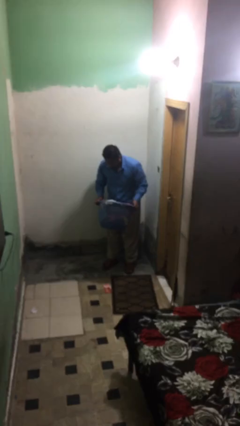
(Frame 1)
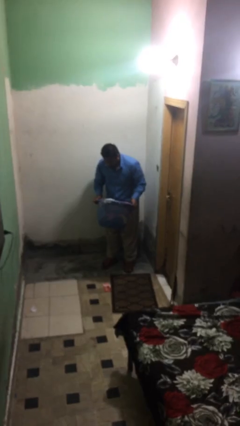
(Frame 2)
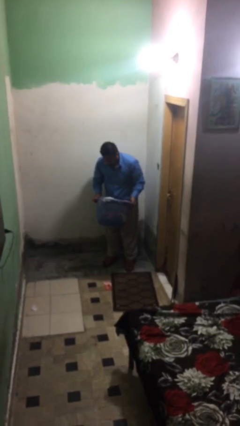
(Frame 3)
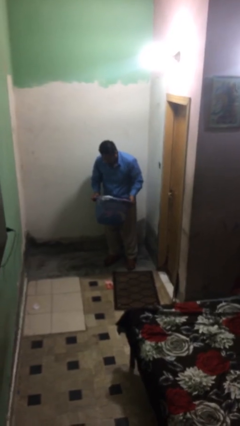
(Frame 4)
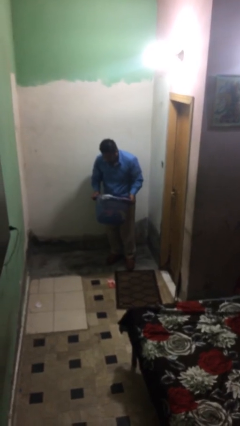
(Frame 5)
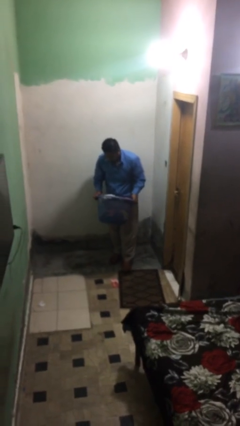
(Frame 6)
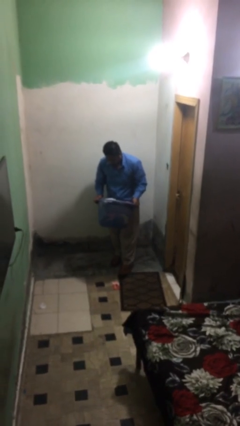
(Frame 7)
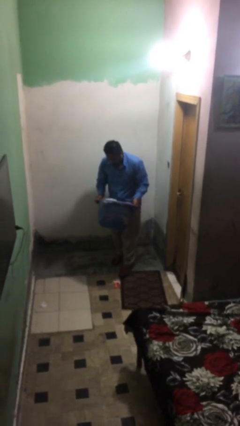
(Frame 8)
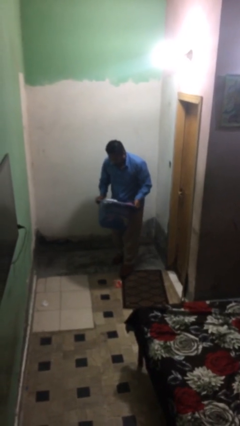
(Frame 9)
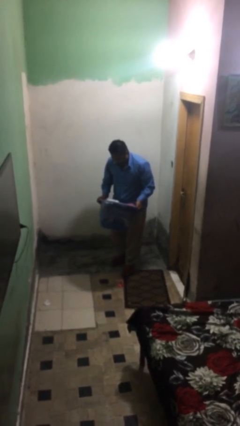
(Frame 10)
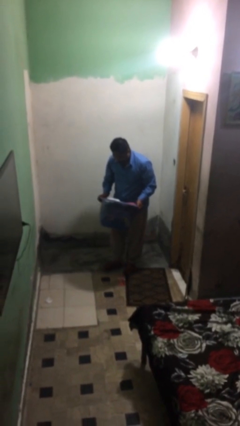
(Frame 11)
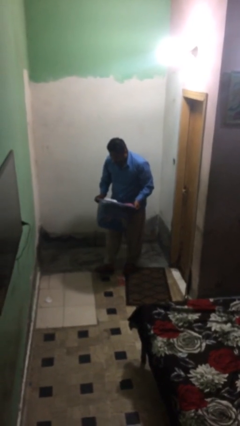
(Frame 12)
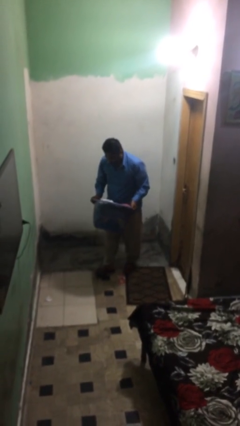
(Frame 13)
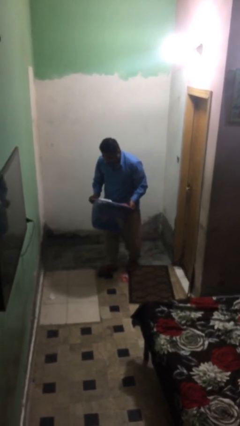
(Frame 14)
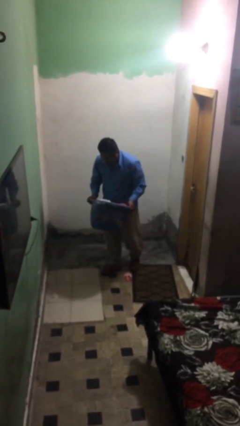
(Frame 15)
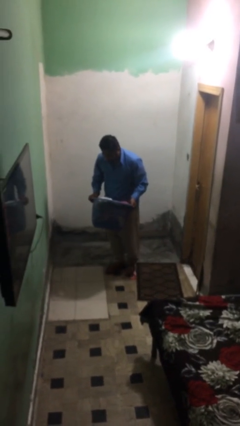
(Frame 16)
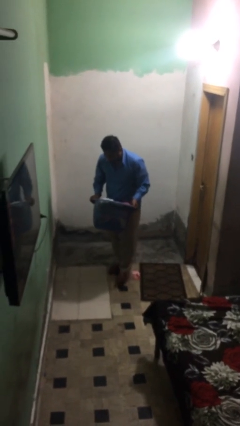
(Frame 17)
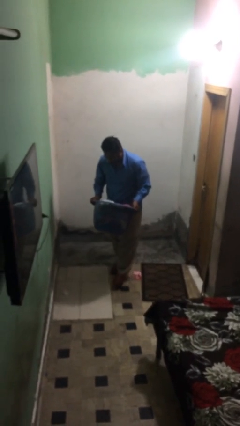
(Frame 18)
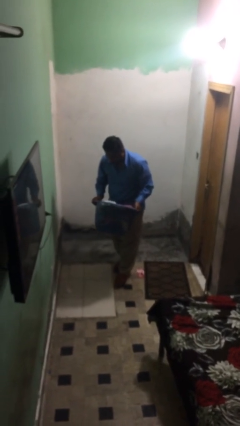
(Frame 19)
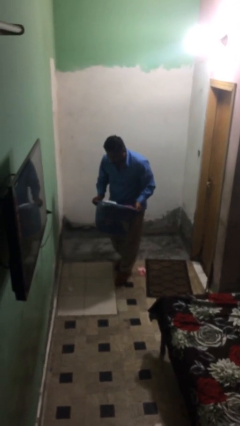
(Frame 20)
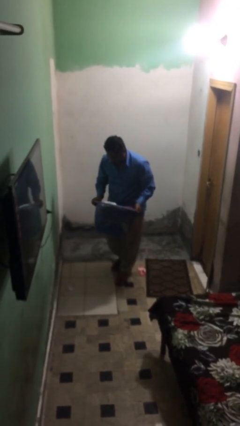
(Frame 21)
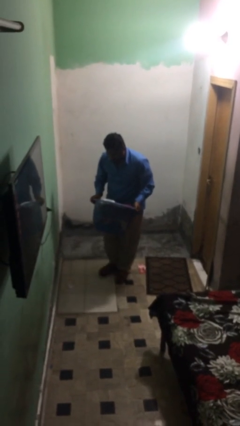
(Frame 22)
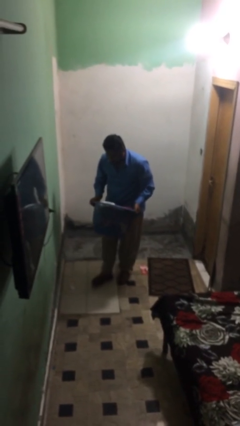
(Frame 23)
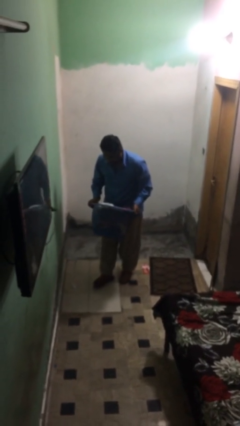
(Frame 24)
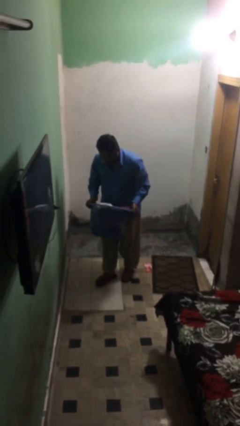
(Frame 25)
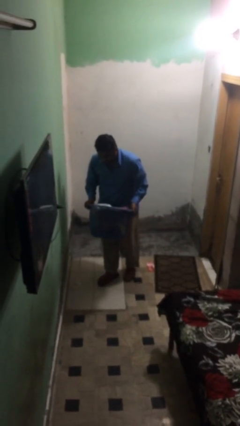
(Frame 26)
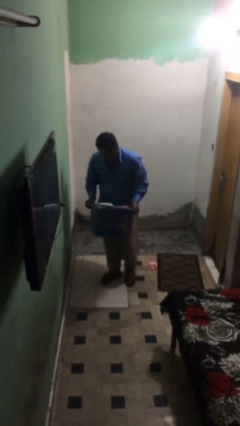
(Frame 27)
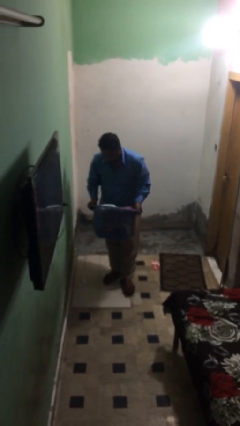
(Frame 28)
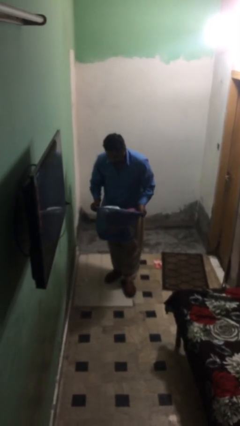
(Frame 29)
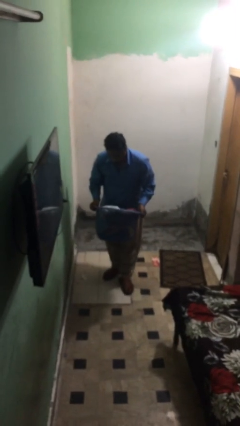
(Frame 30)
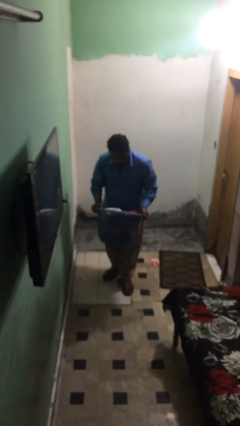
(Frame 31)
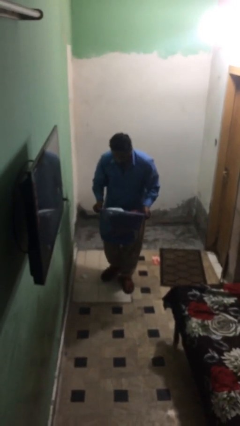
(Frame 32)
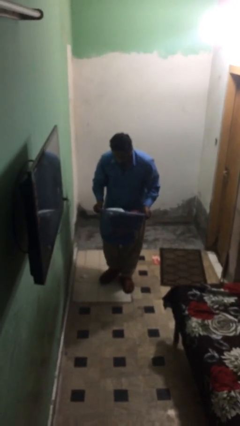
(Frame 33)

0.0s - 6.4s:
person carries heavy object

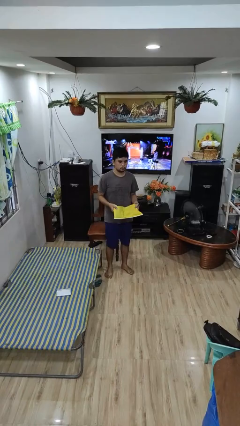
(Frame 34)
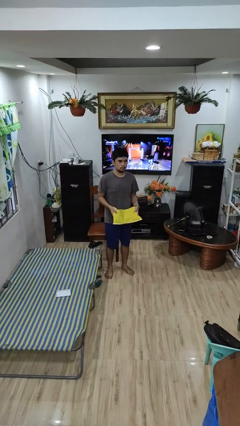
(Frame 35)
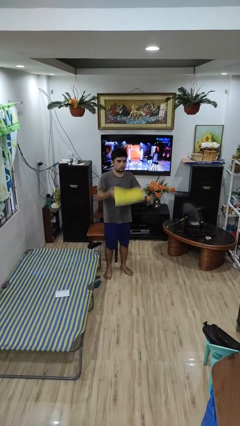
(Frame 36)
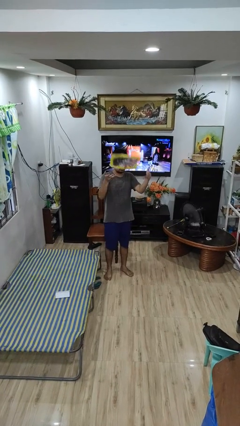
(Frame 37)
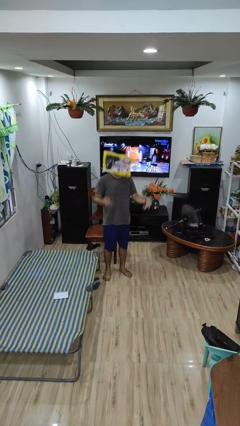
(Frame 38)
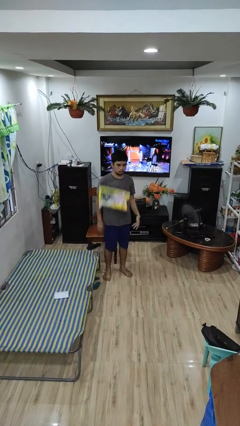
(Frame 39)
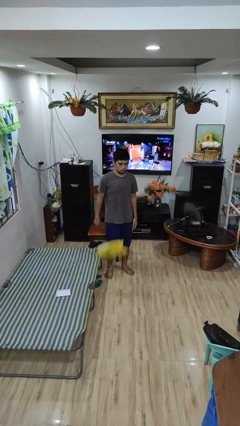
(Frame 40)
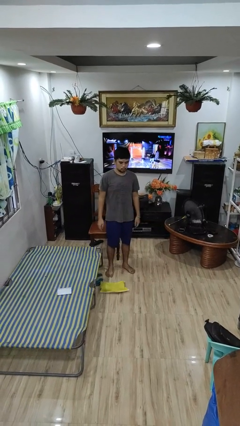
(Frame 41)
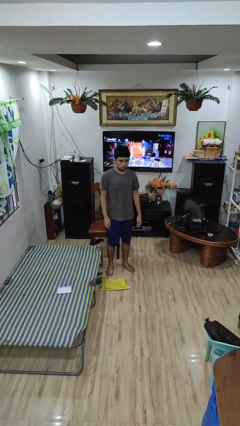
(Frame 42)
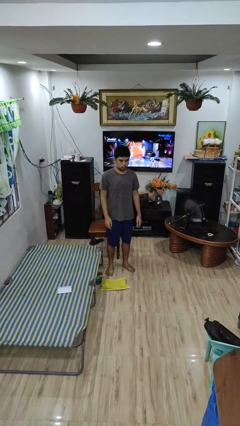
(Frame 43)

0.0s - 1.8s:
person throws object into air

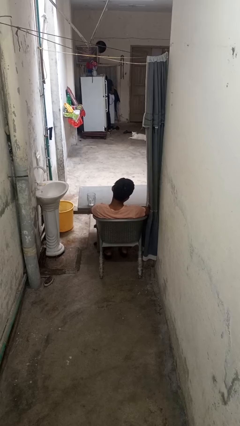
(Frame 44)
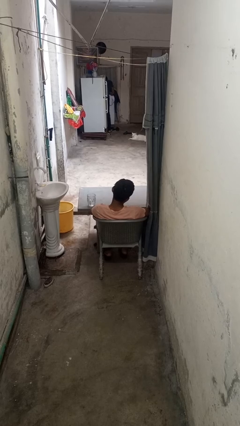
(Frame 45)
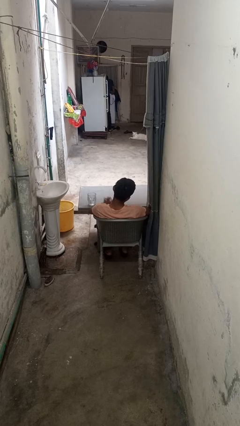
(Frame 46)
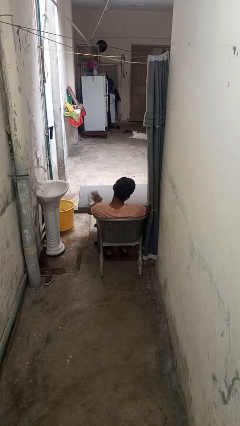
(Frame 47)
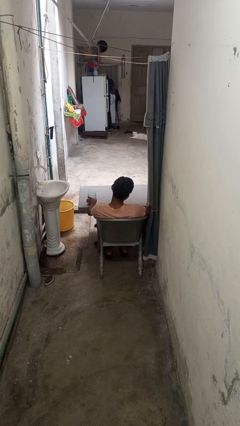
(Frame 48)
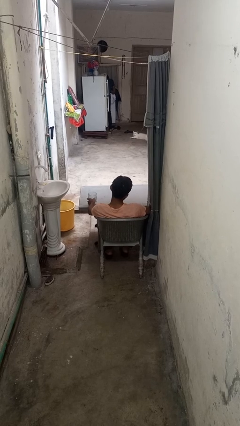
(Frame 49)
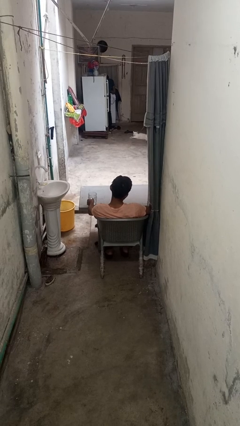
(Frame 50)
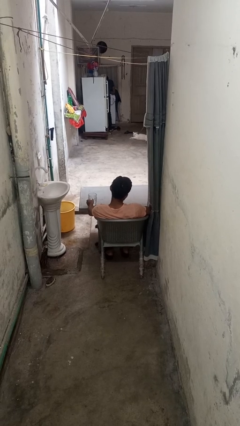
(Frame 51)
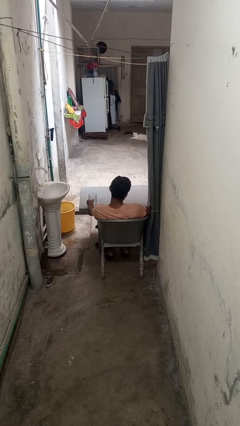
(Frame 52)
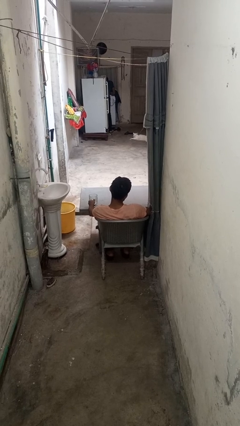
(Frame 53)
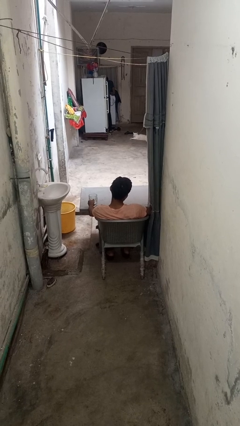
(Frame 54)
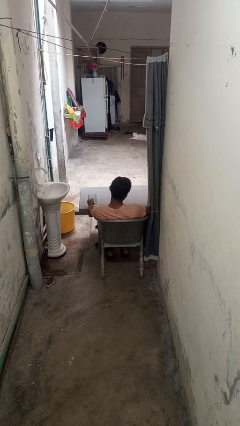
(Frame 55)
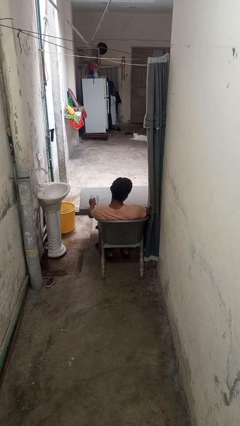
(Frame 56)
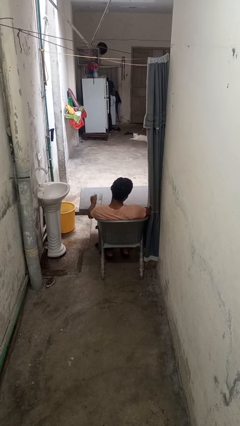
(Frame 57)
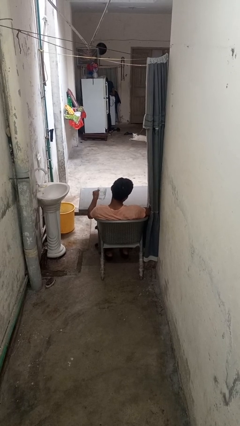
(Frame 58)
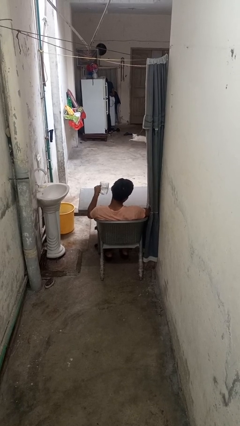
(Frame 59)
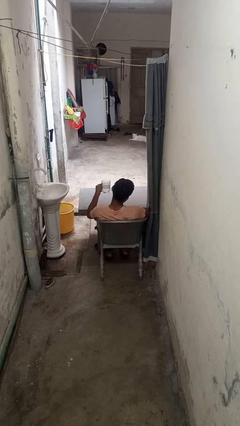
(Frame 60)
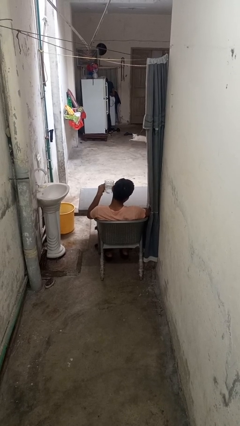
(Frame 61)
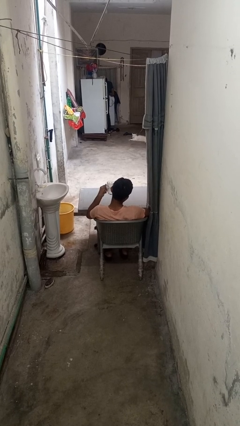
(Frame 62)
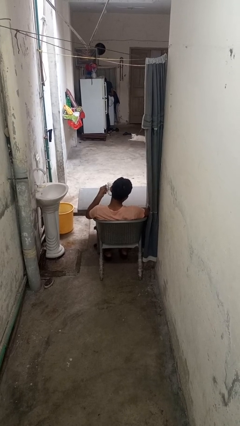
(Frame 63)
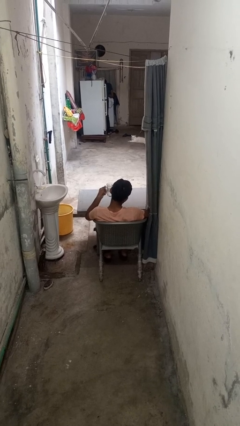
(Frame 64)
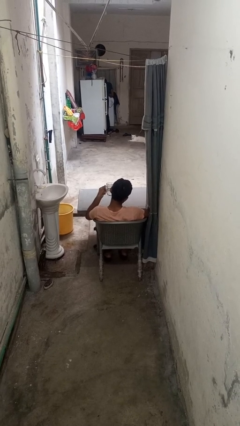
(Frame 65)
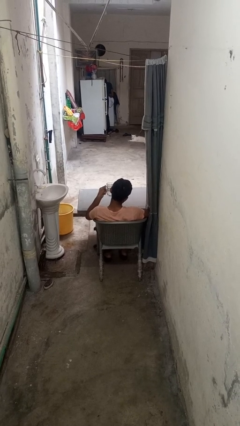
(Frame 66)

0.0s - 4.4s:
person picks up object from table

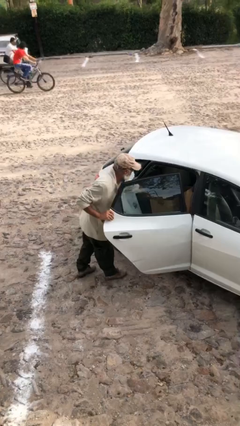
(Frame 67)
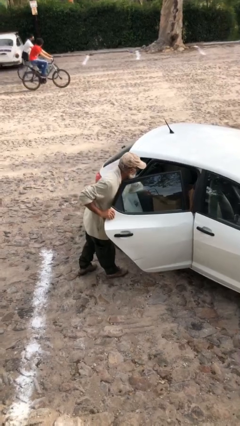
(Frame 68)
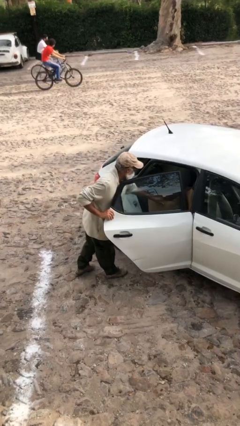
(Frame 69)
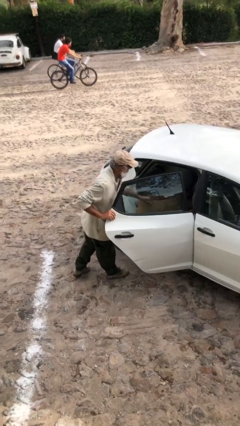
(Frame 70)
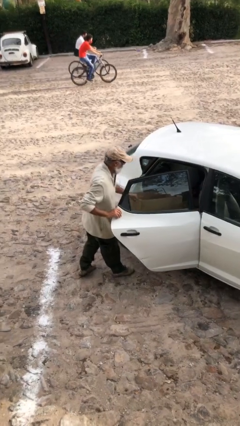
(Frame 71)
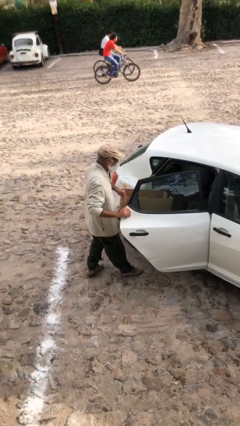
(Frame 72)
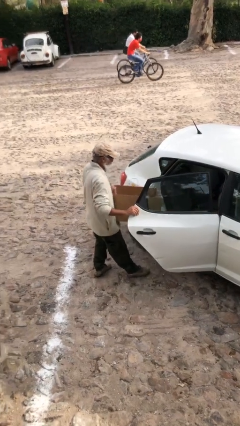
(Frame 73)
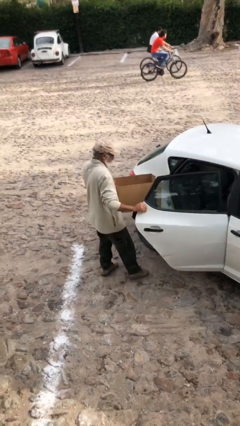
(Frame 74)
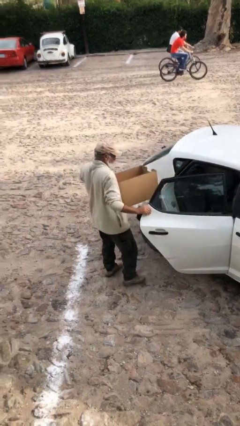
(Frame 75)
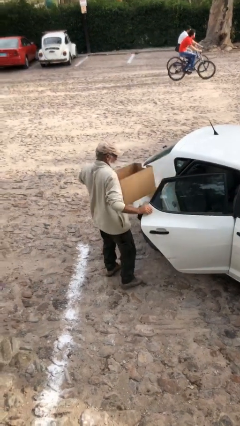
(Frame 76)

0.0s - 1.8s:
person unloads car

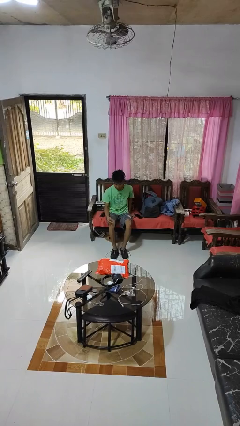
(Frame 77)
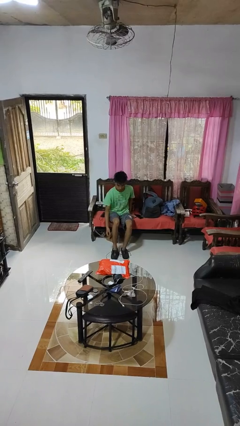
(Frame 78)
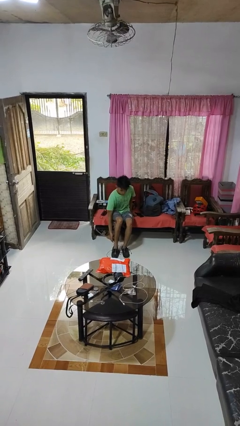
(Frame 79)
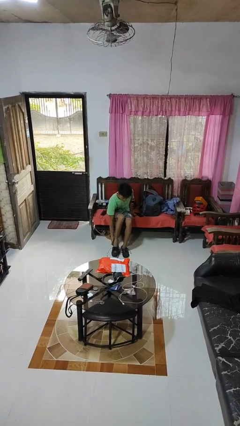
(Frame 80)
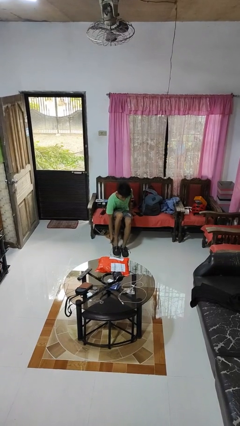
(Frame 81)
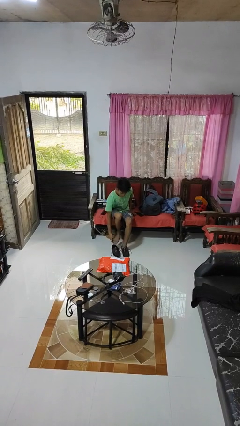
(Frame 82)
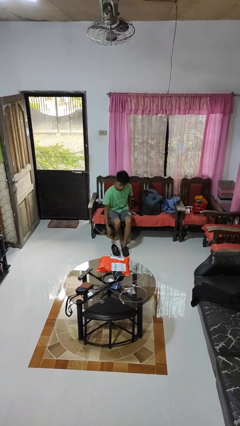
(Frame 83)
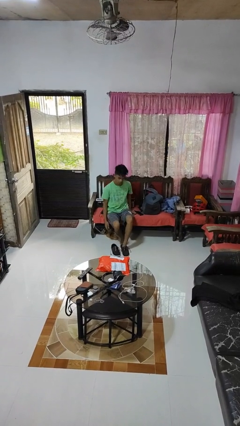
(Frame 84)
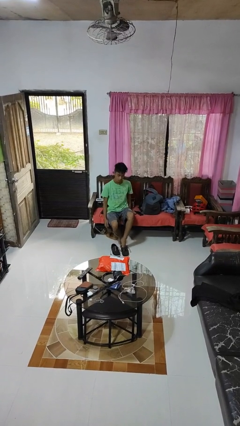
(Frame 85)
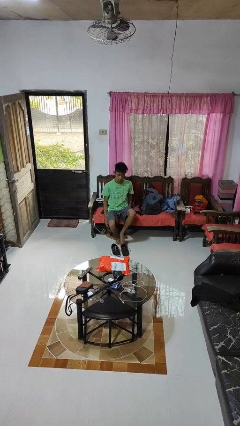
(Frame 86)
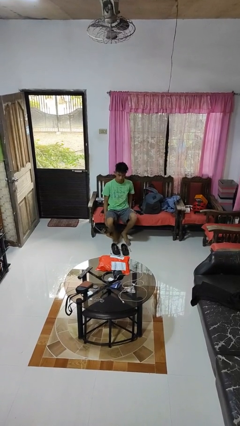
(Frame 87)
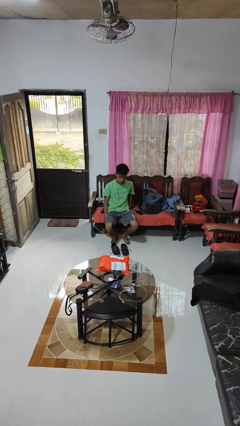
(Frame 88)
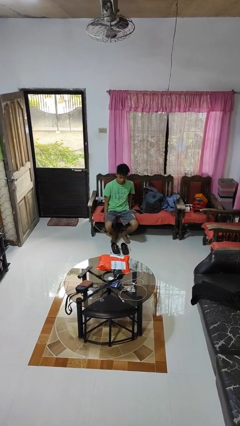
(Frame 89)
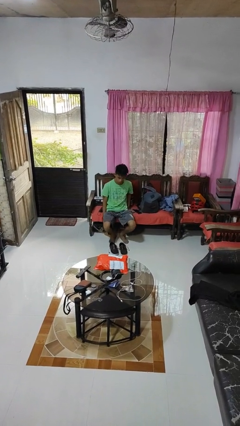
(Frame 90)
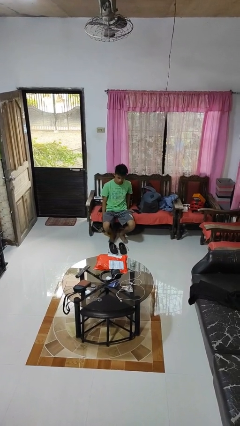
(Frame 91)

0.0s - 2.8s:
person takes off shoes

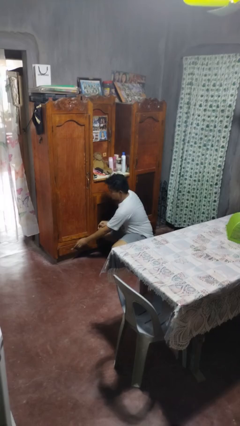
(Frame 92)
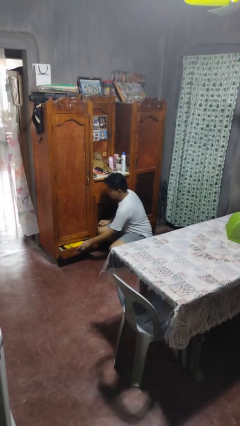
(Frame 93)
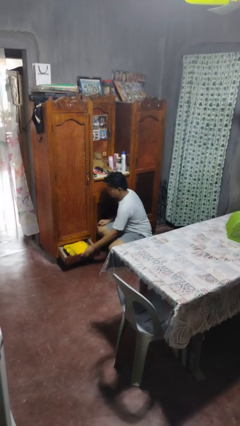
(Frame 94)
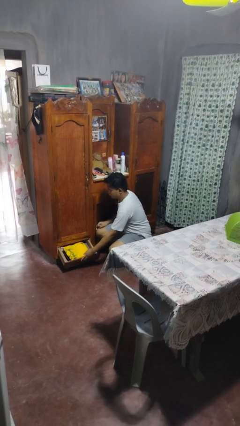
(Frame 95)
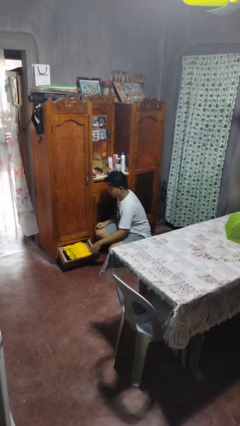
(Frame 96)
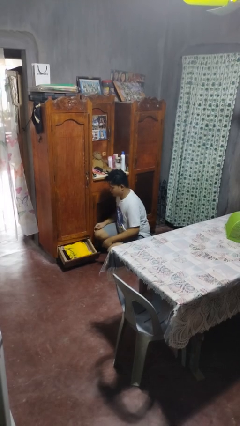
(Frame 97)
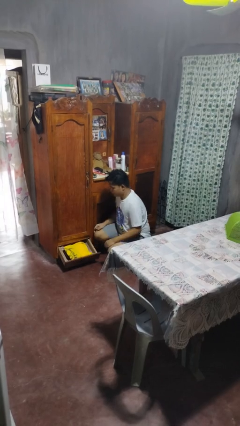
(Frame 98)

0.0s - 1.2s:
person opens dresser drawer
